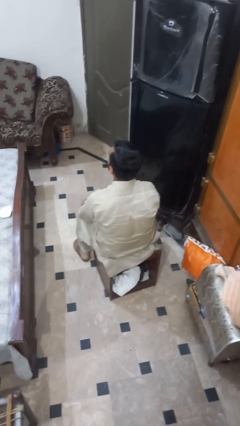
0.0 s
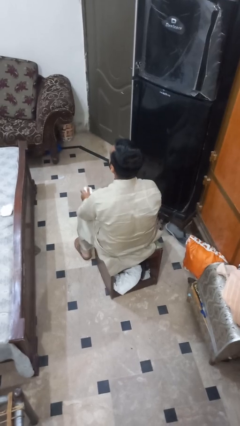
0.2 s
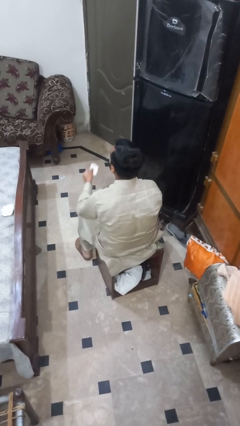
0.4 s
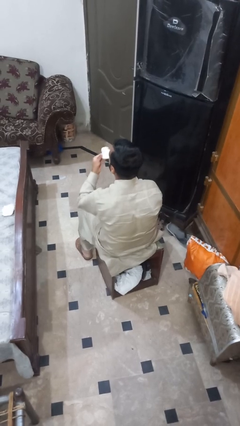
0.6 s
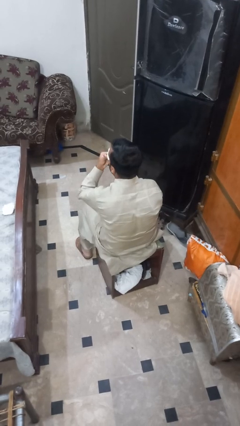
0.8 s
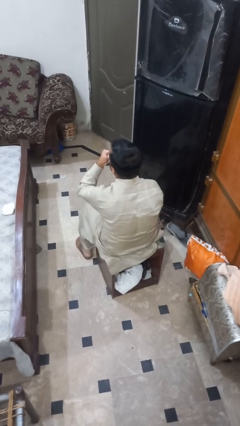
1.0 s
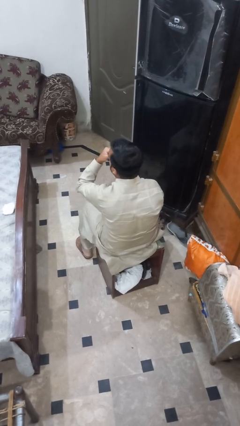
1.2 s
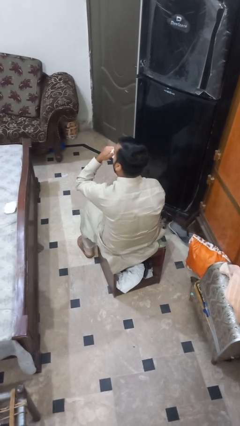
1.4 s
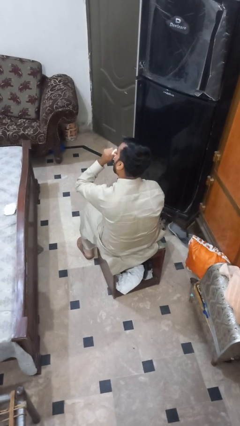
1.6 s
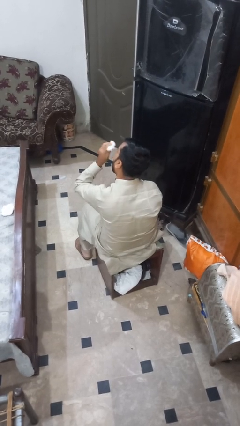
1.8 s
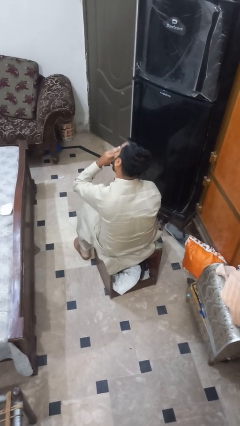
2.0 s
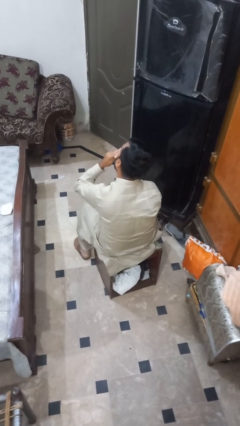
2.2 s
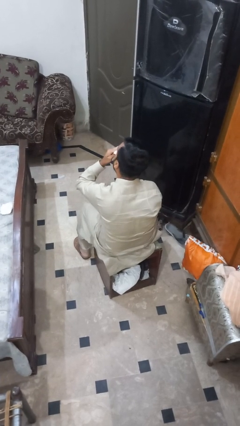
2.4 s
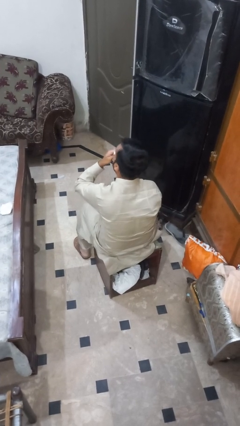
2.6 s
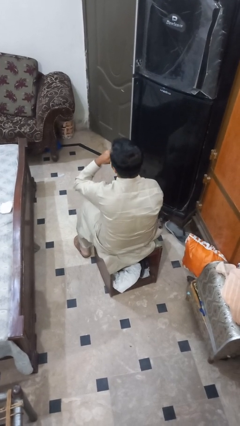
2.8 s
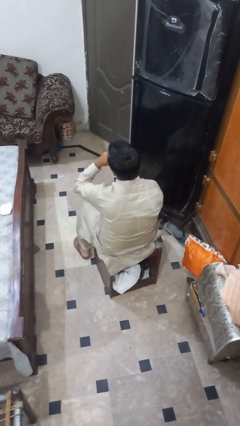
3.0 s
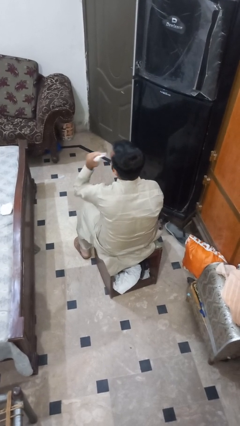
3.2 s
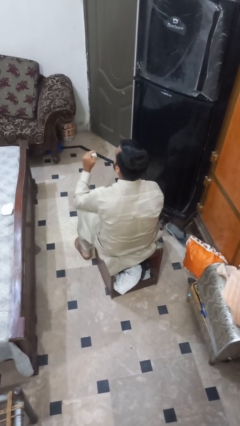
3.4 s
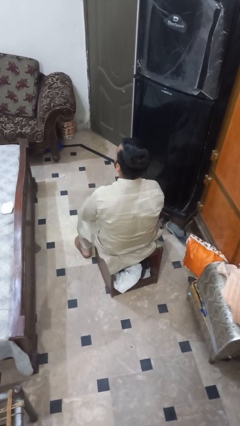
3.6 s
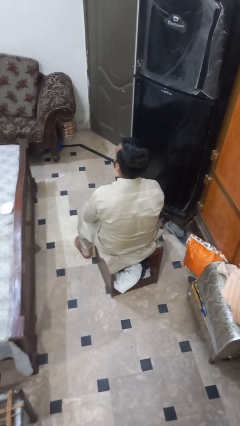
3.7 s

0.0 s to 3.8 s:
person blows nose

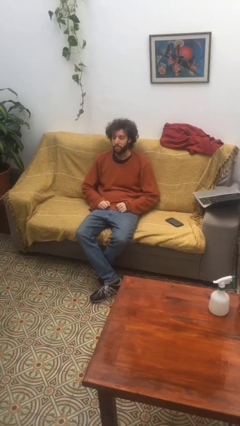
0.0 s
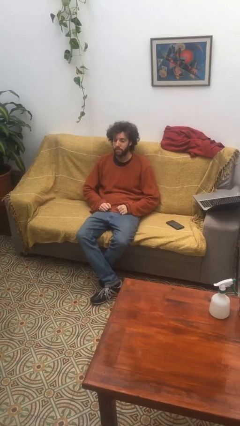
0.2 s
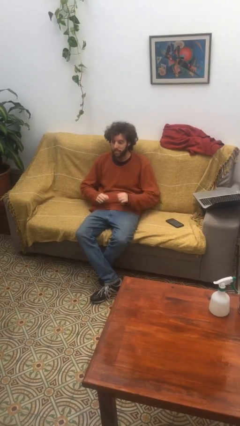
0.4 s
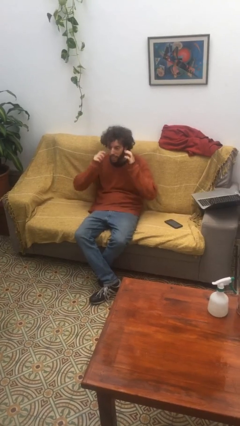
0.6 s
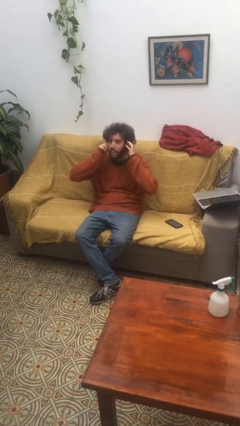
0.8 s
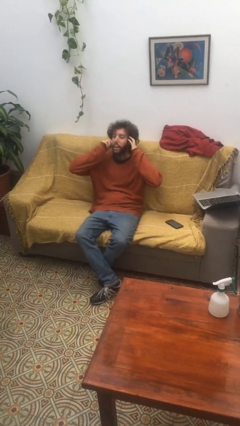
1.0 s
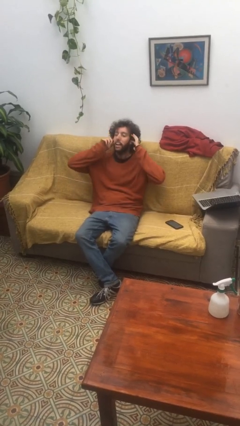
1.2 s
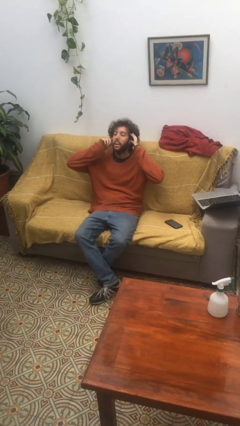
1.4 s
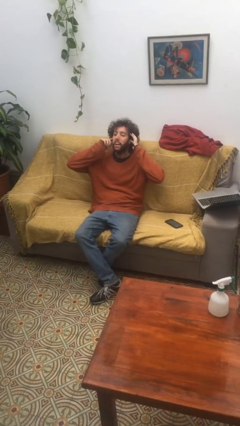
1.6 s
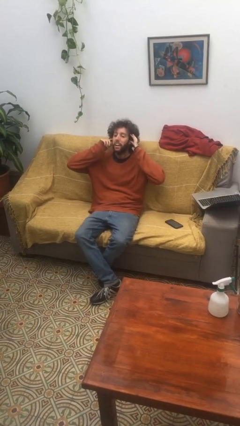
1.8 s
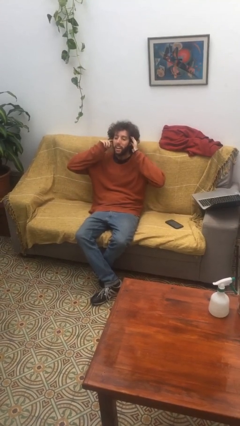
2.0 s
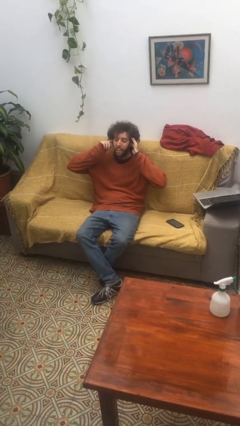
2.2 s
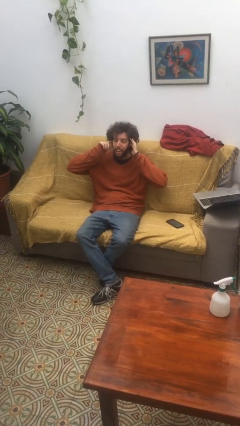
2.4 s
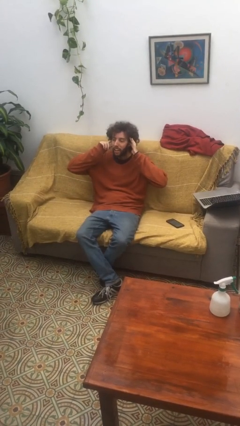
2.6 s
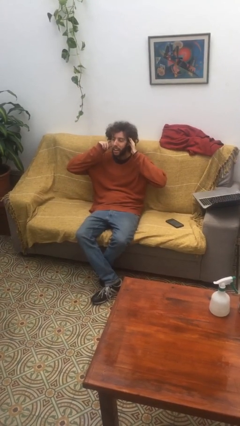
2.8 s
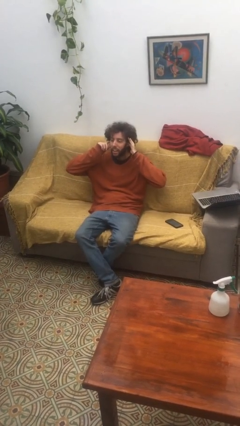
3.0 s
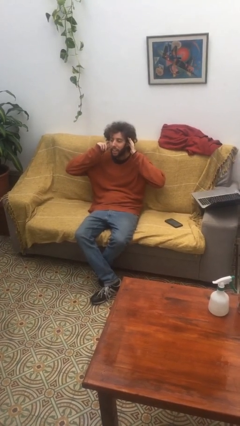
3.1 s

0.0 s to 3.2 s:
person puts fingers in ear

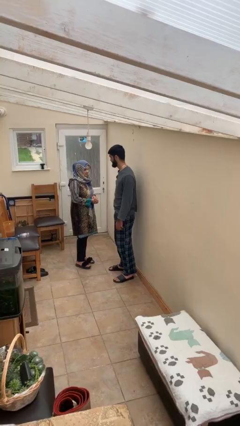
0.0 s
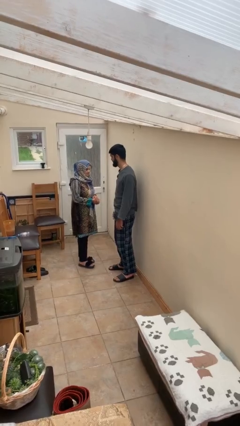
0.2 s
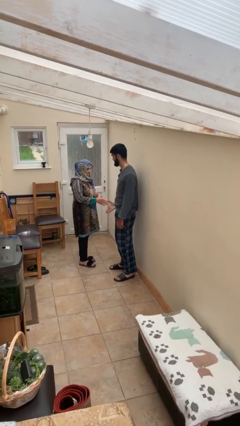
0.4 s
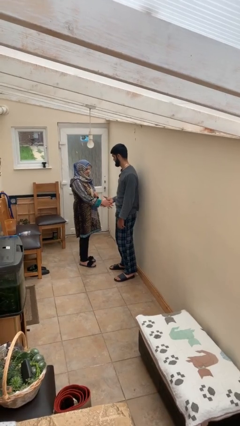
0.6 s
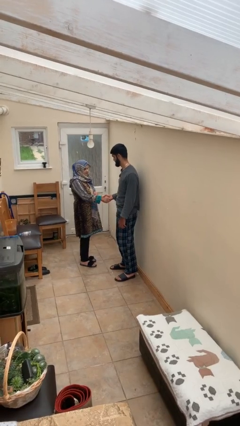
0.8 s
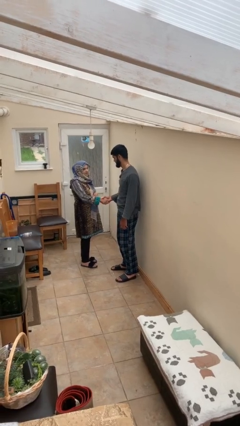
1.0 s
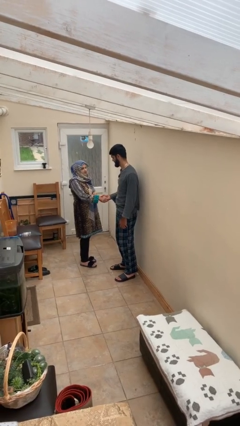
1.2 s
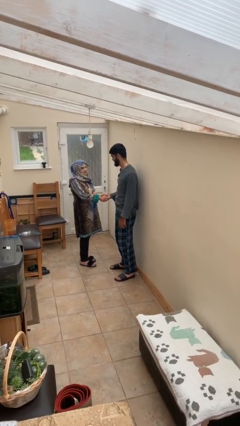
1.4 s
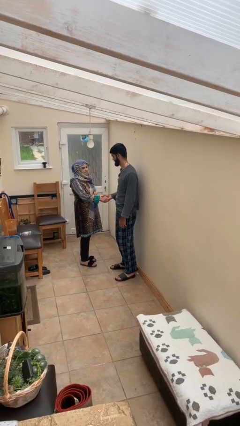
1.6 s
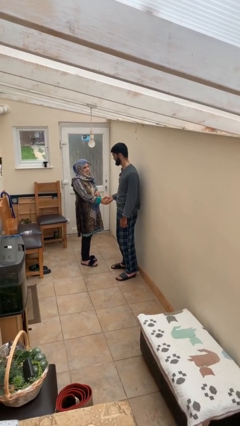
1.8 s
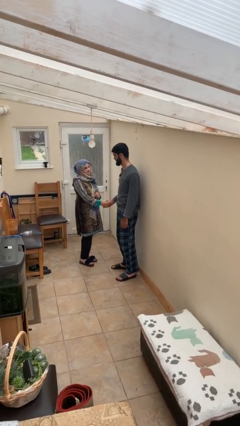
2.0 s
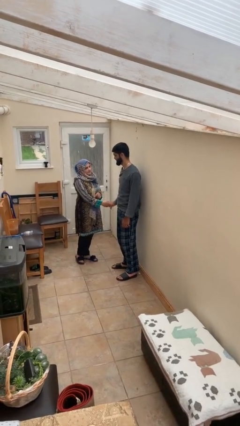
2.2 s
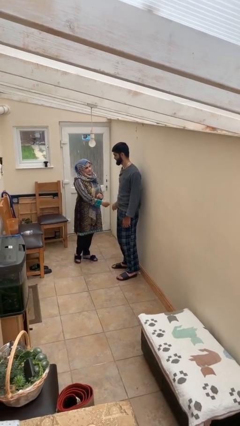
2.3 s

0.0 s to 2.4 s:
person shakes hand

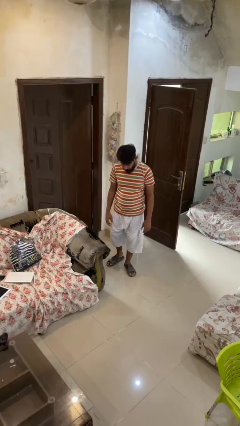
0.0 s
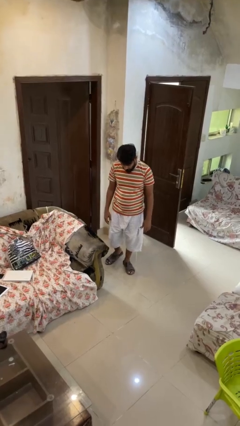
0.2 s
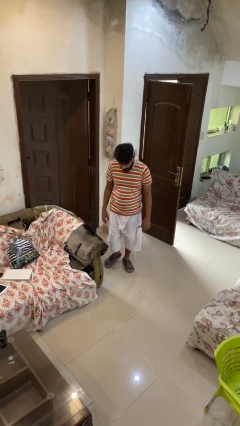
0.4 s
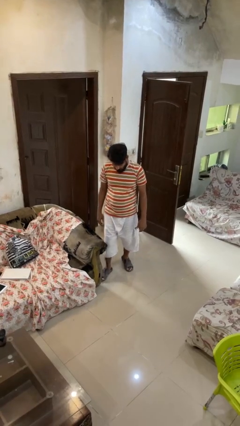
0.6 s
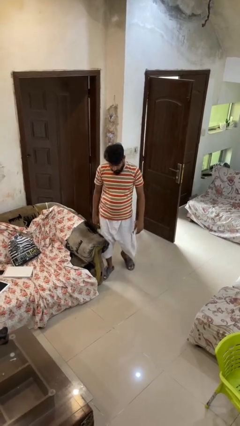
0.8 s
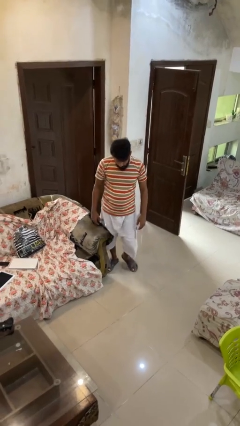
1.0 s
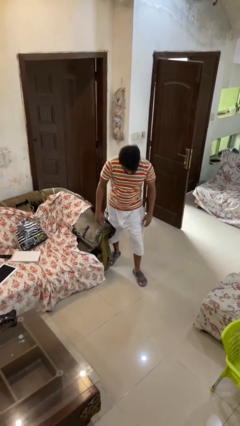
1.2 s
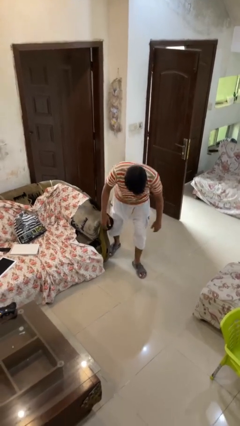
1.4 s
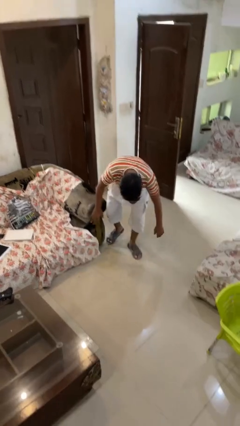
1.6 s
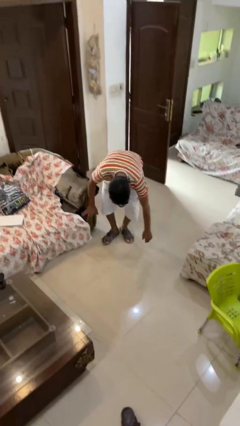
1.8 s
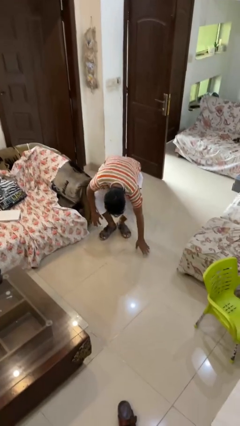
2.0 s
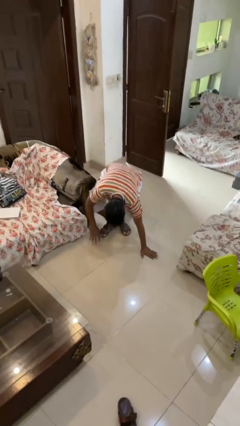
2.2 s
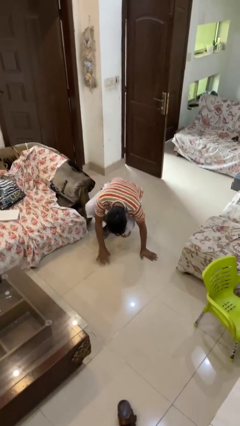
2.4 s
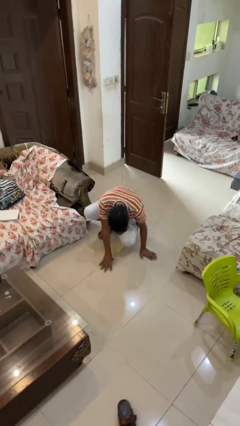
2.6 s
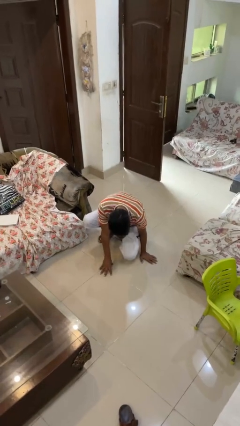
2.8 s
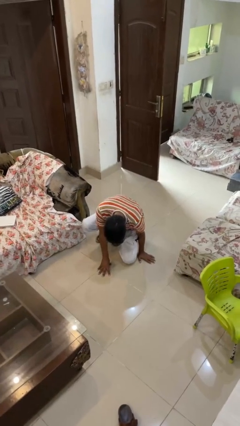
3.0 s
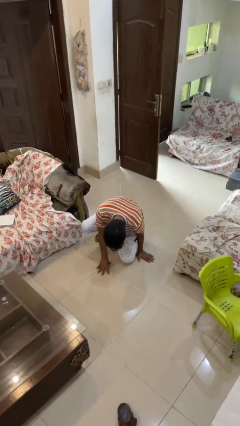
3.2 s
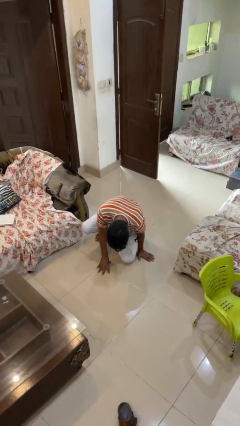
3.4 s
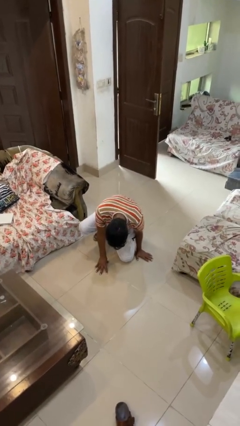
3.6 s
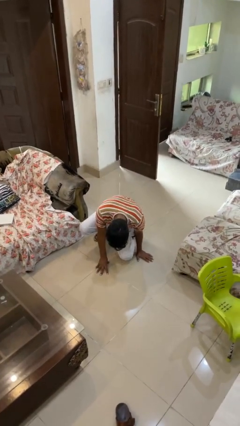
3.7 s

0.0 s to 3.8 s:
person trips on object on floor

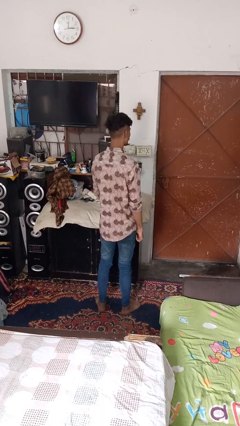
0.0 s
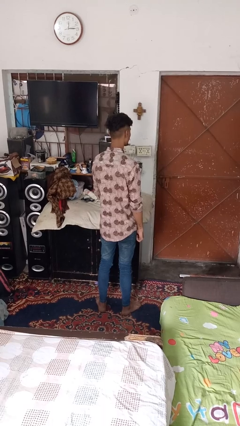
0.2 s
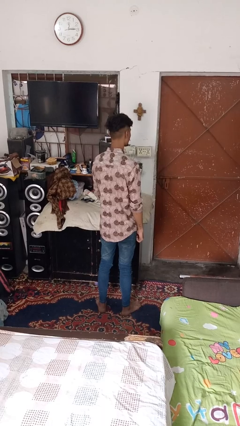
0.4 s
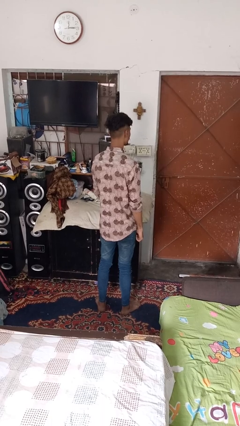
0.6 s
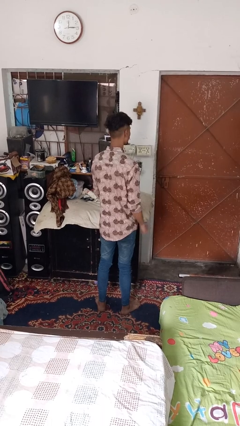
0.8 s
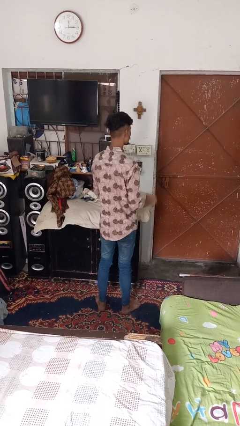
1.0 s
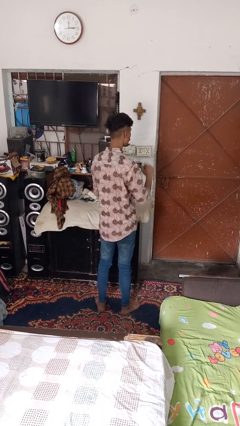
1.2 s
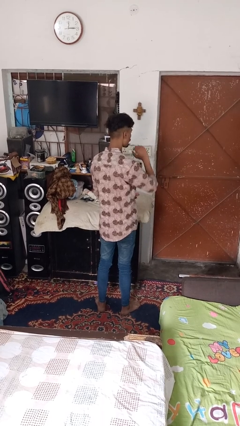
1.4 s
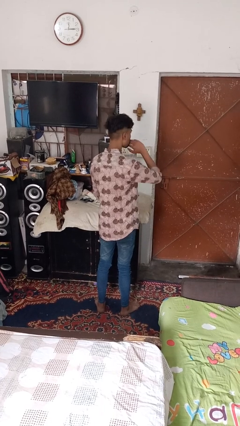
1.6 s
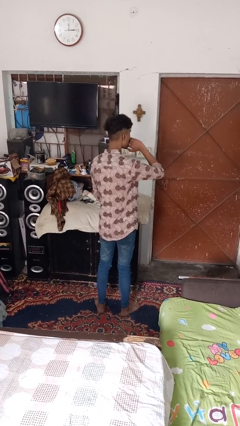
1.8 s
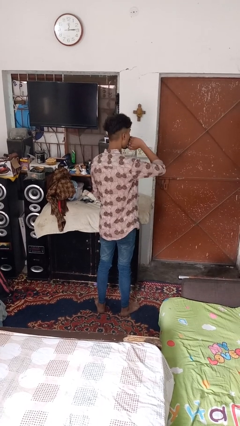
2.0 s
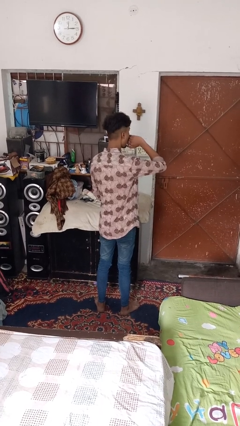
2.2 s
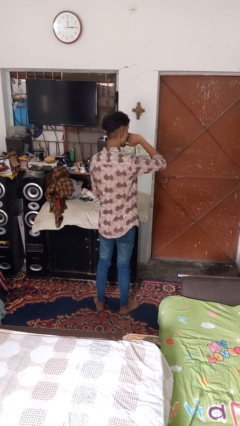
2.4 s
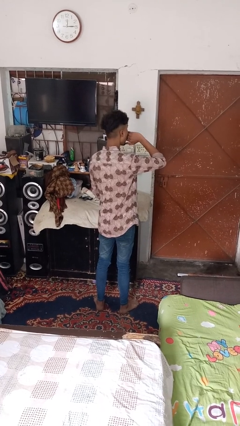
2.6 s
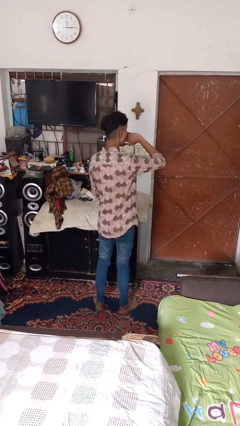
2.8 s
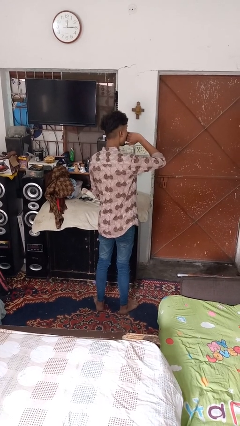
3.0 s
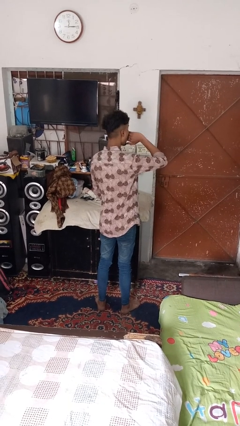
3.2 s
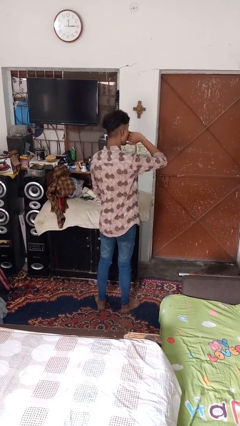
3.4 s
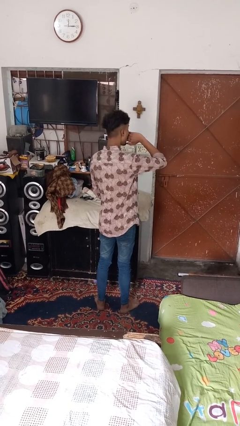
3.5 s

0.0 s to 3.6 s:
person yawns

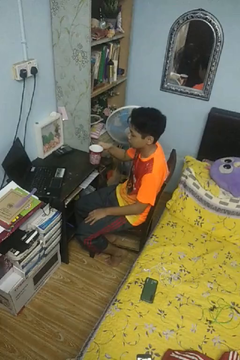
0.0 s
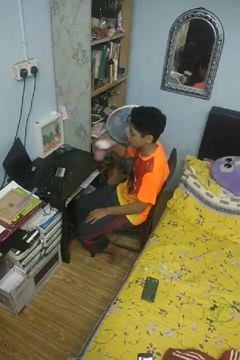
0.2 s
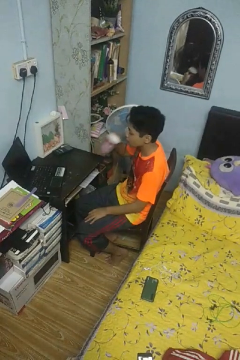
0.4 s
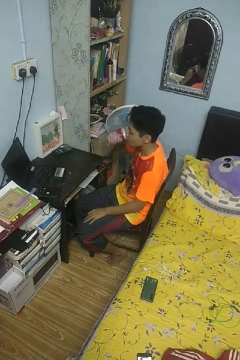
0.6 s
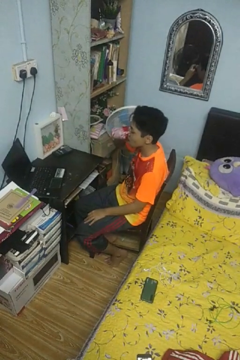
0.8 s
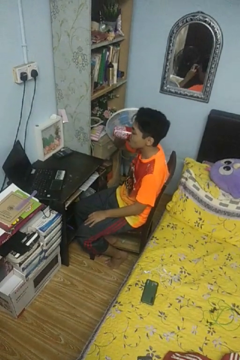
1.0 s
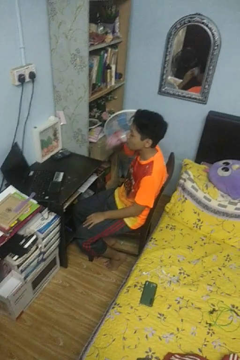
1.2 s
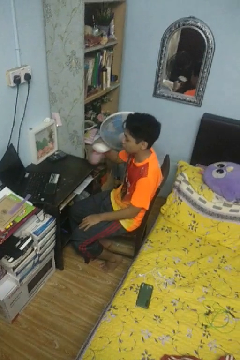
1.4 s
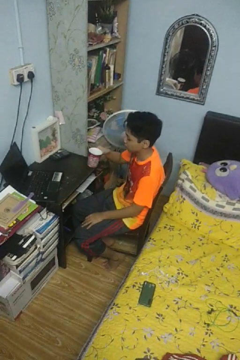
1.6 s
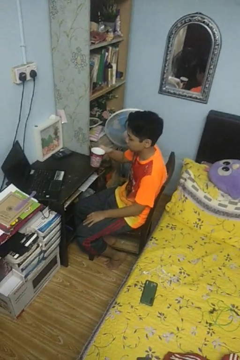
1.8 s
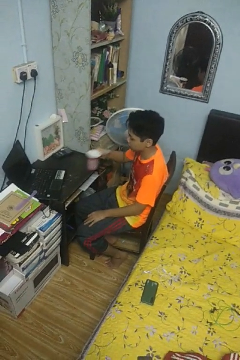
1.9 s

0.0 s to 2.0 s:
person closes refrigerator
